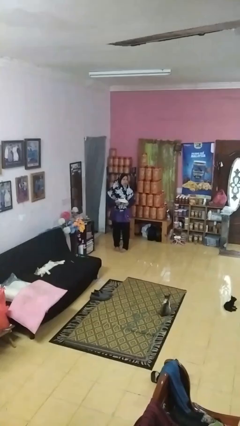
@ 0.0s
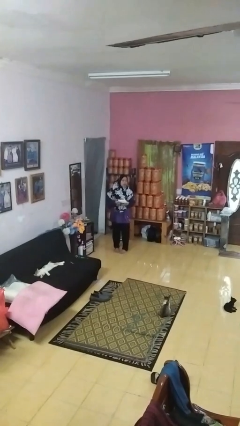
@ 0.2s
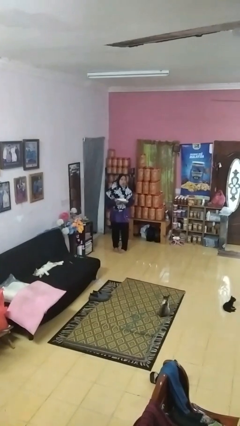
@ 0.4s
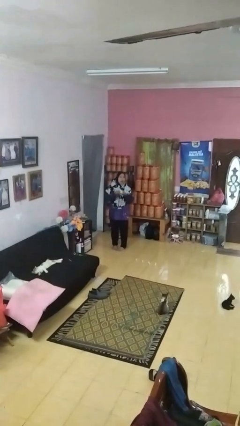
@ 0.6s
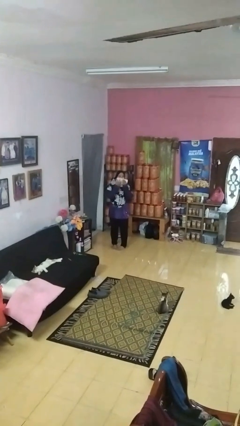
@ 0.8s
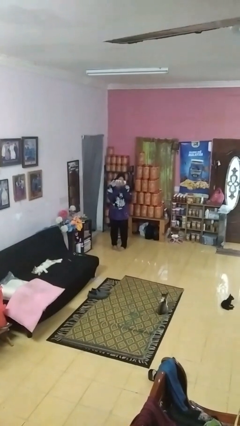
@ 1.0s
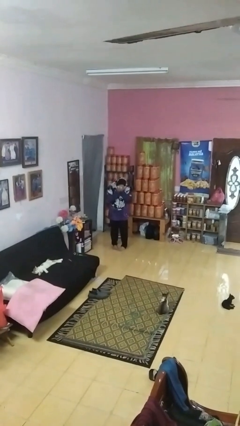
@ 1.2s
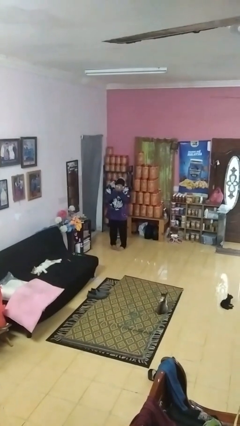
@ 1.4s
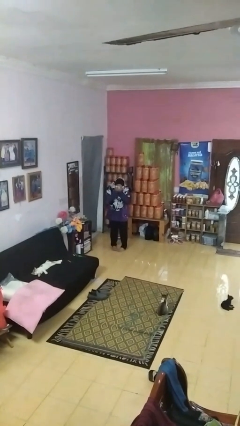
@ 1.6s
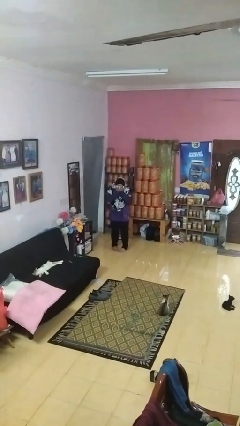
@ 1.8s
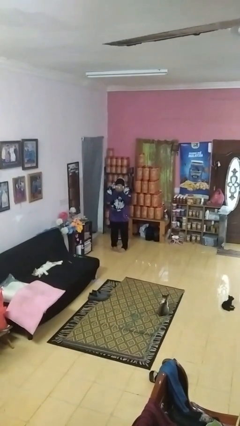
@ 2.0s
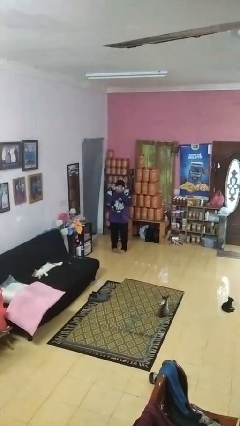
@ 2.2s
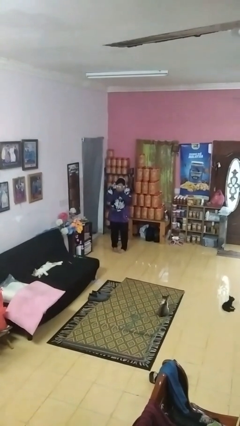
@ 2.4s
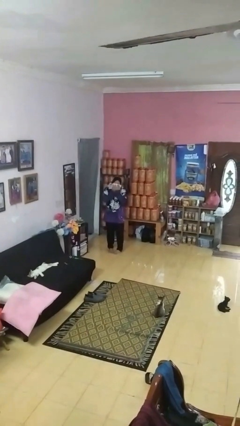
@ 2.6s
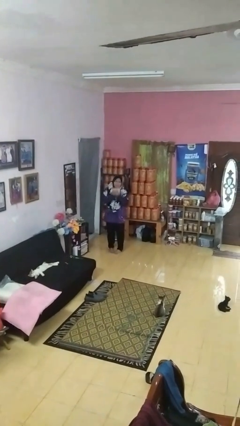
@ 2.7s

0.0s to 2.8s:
person blows nose

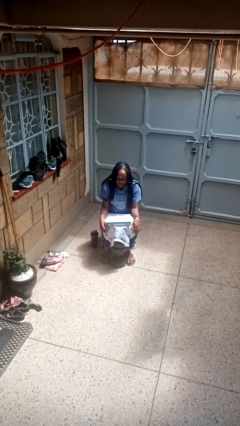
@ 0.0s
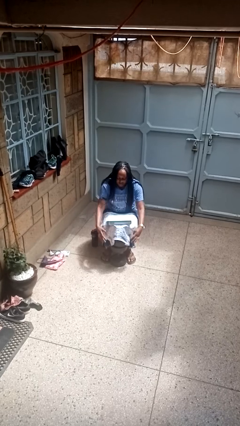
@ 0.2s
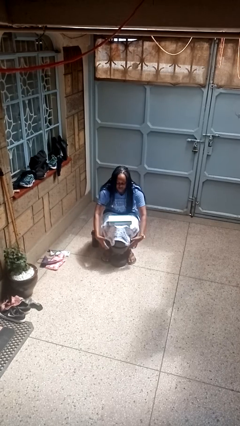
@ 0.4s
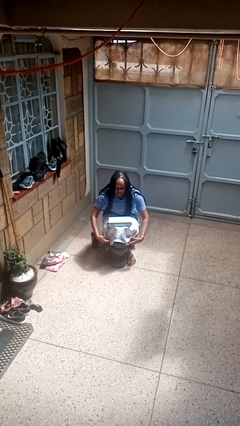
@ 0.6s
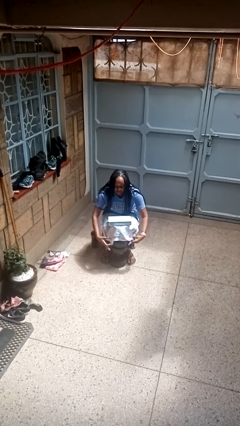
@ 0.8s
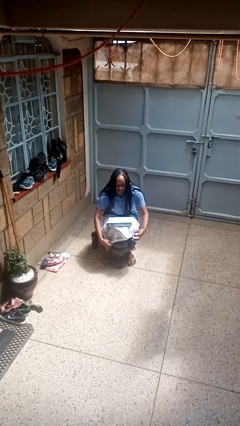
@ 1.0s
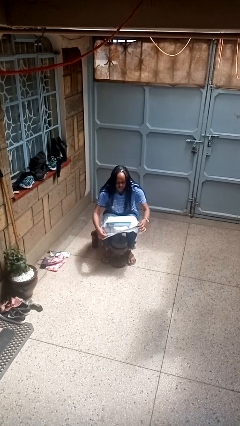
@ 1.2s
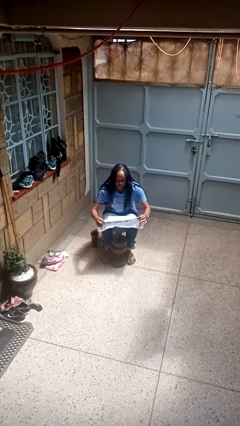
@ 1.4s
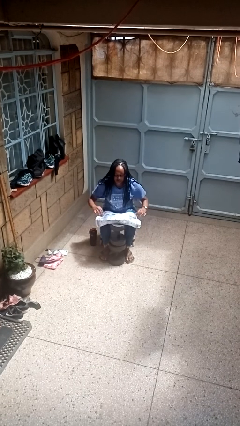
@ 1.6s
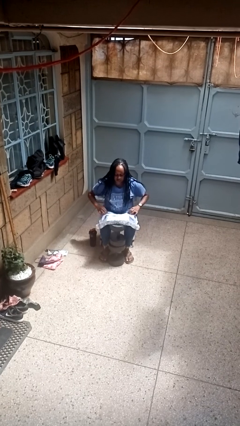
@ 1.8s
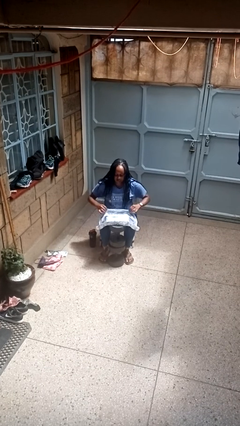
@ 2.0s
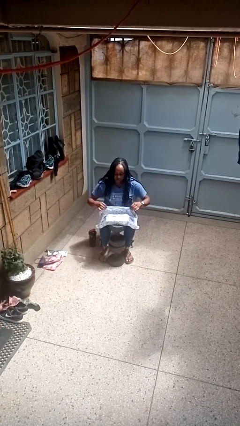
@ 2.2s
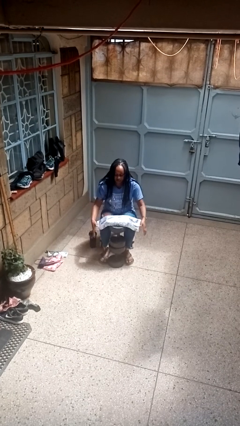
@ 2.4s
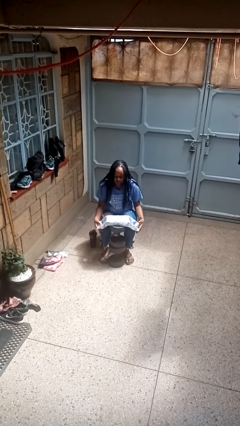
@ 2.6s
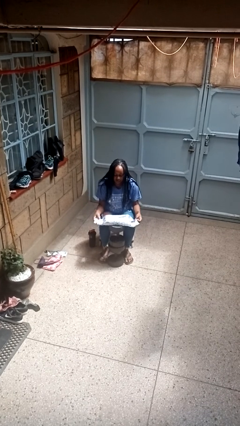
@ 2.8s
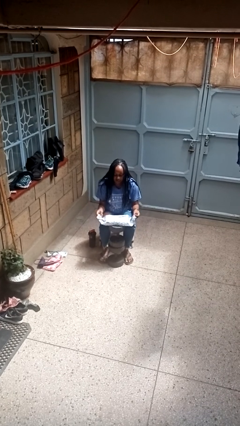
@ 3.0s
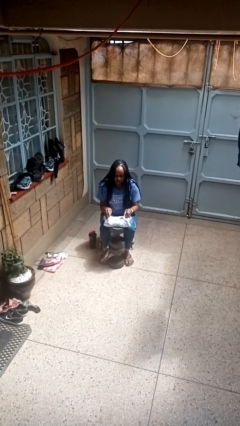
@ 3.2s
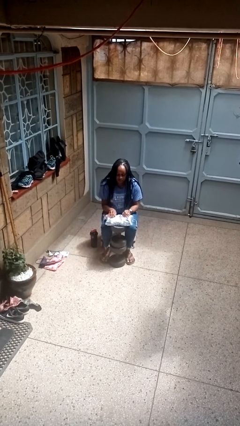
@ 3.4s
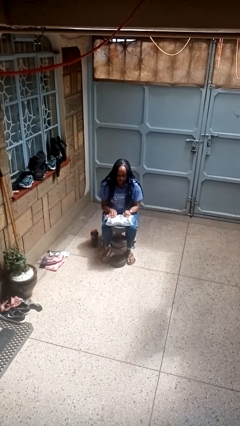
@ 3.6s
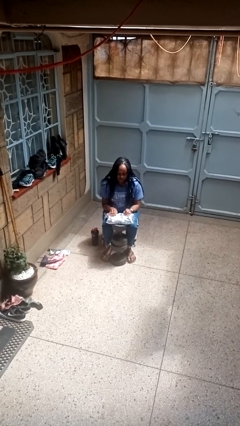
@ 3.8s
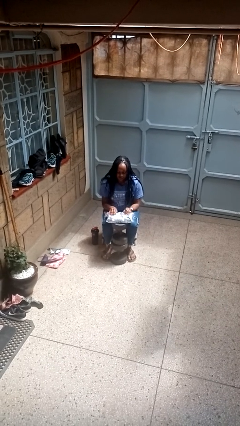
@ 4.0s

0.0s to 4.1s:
person wraps box

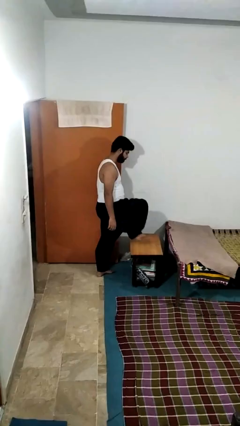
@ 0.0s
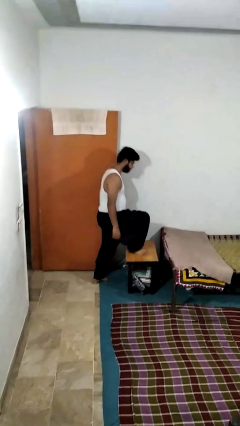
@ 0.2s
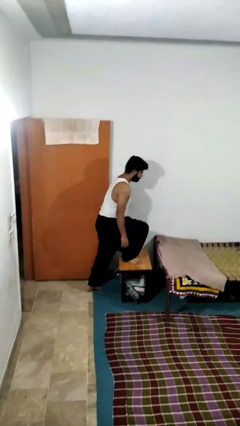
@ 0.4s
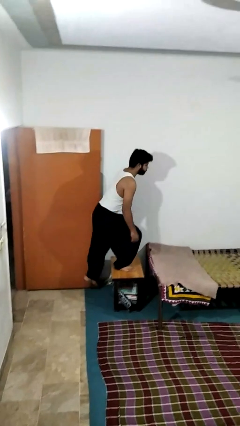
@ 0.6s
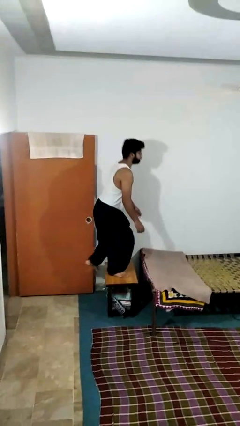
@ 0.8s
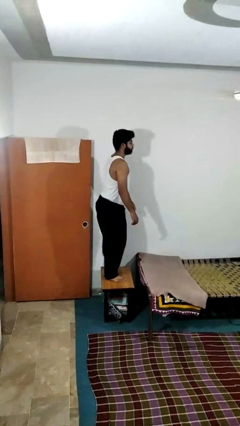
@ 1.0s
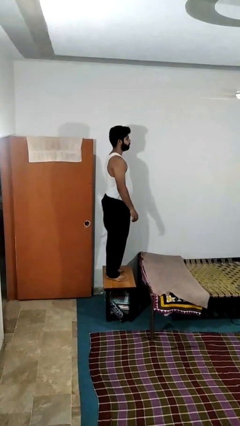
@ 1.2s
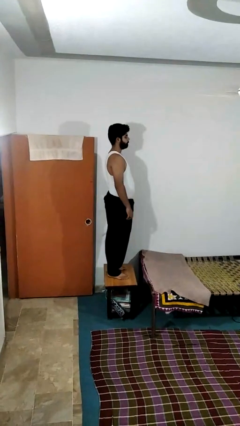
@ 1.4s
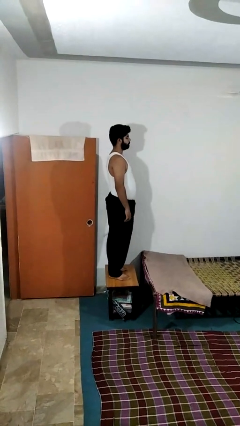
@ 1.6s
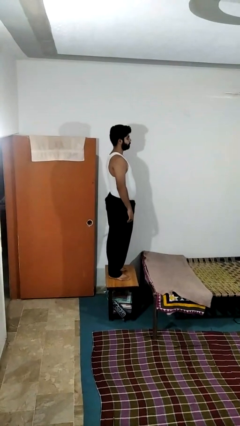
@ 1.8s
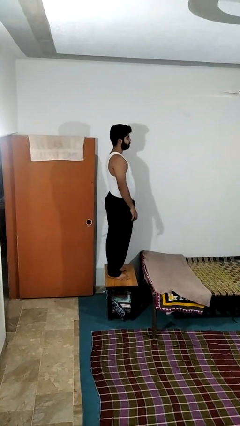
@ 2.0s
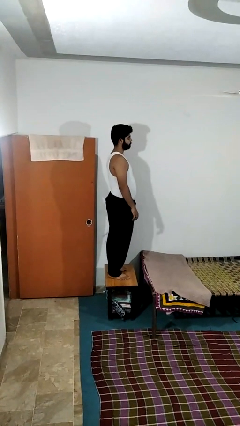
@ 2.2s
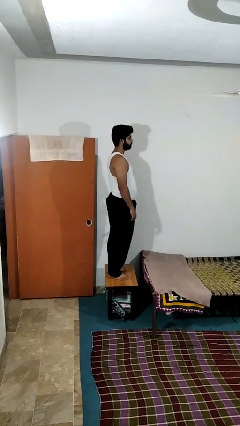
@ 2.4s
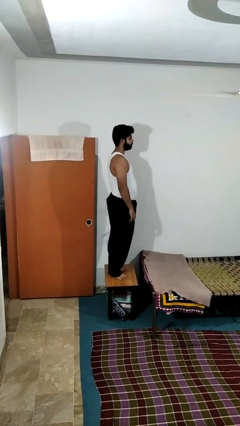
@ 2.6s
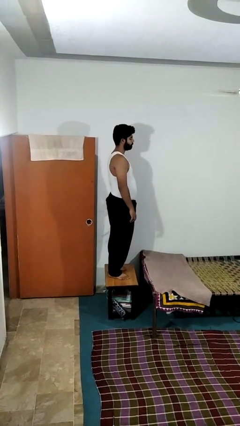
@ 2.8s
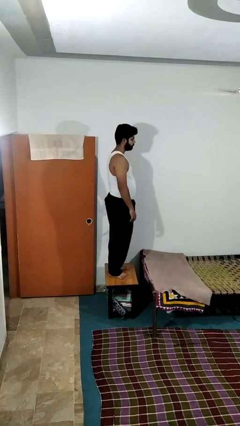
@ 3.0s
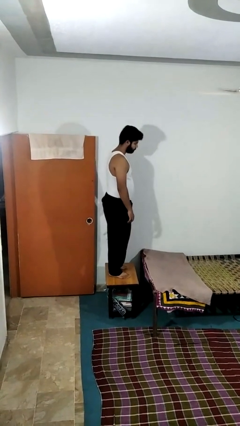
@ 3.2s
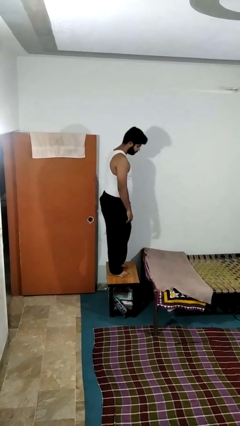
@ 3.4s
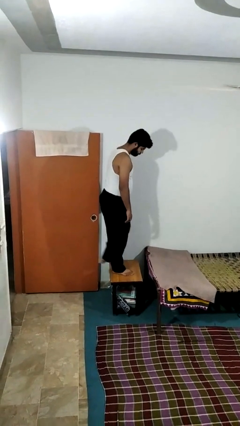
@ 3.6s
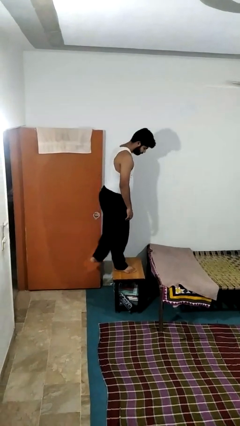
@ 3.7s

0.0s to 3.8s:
person climbs on table

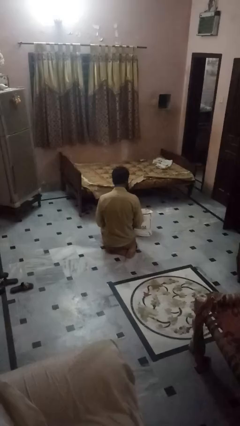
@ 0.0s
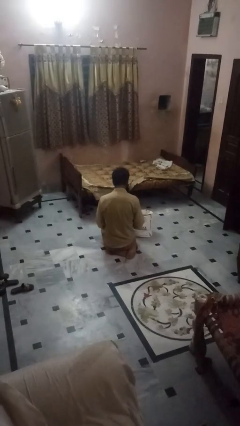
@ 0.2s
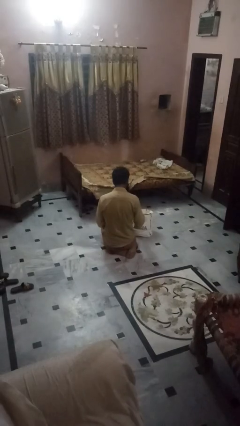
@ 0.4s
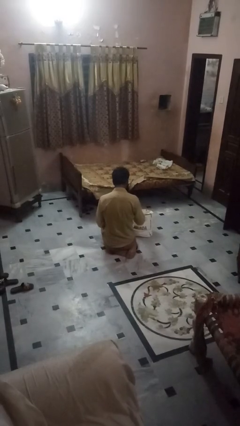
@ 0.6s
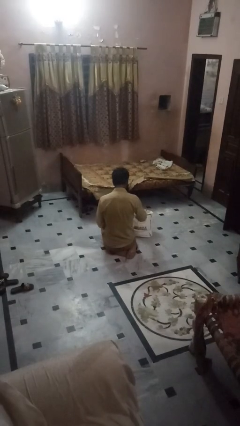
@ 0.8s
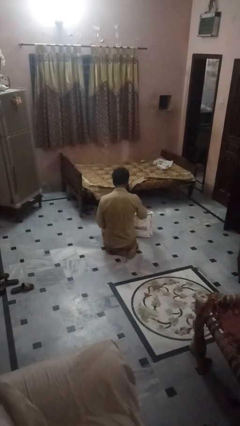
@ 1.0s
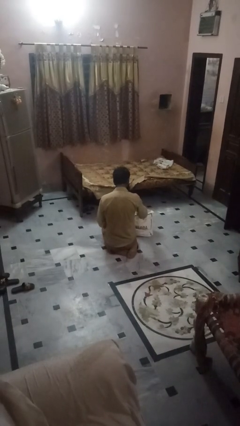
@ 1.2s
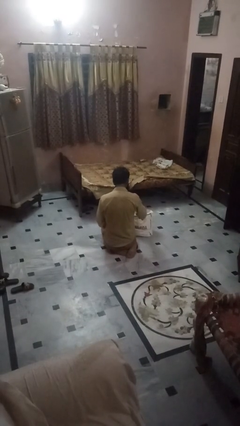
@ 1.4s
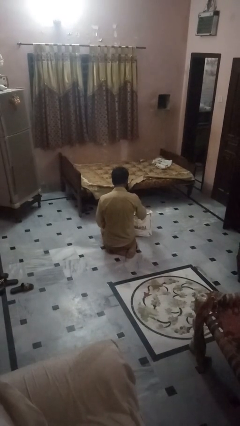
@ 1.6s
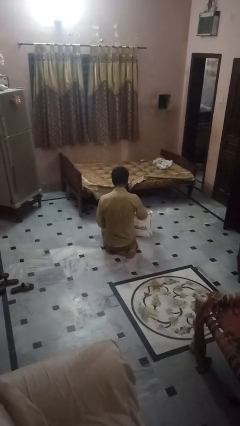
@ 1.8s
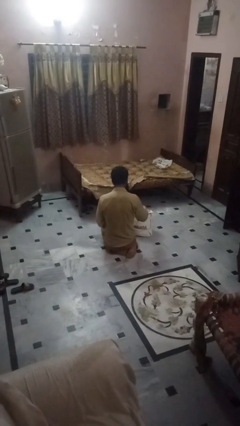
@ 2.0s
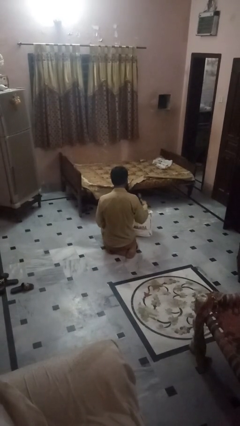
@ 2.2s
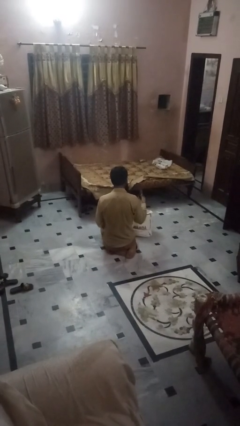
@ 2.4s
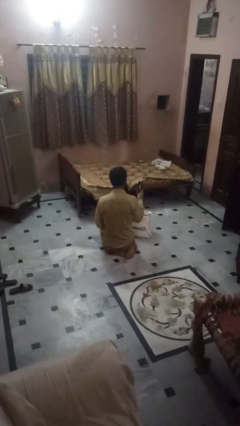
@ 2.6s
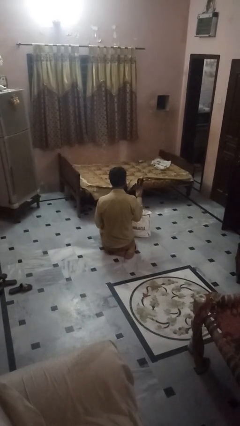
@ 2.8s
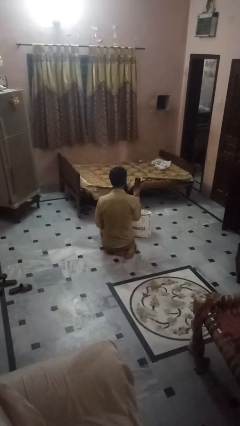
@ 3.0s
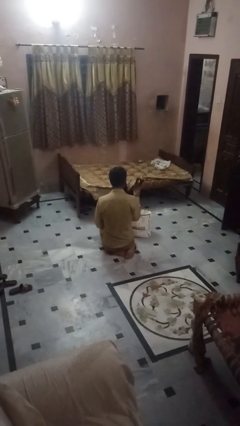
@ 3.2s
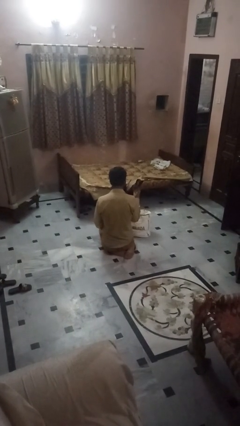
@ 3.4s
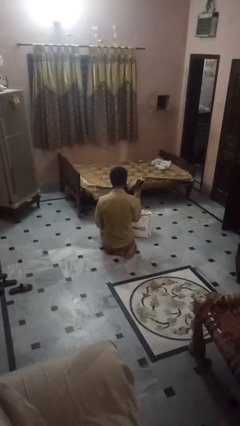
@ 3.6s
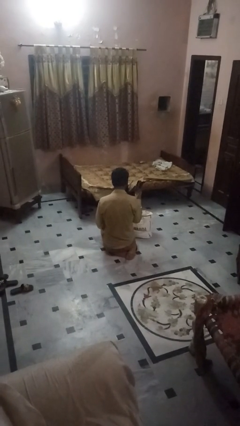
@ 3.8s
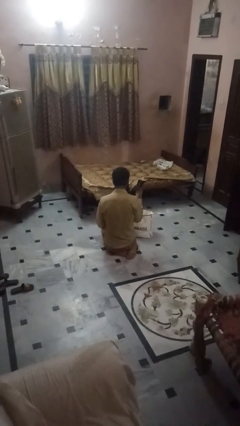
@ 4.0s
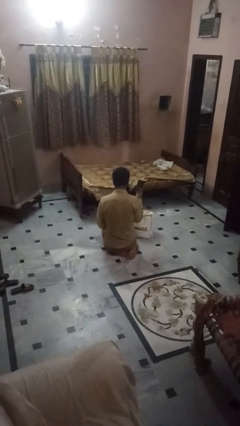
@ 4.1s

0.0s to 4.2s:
person takes object from bag

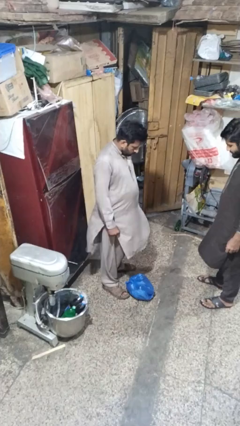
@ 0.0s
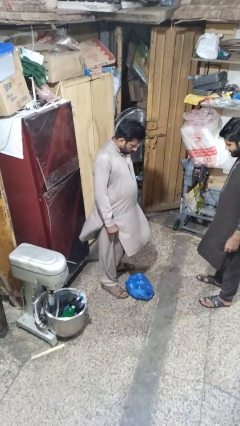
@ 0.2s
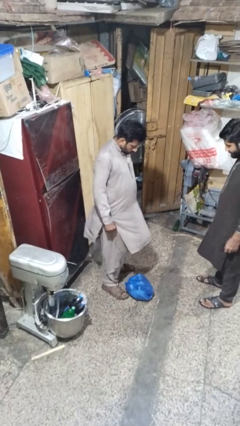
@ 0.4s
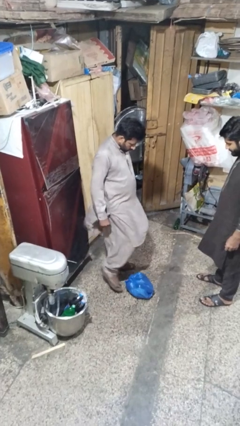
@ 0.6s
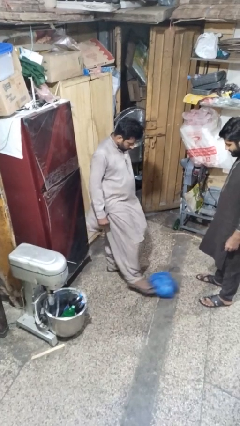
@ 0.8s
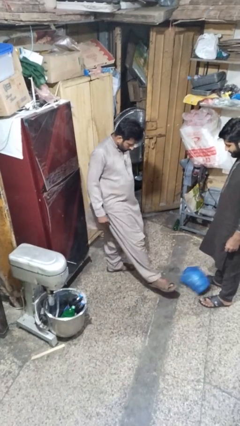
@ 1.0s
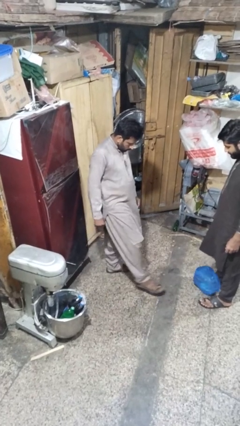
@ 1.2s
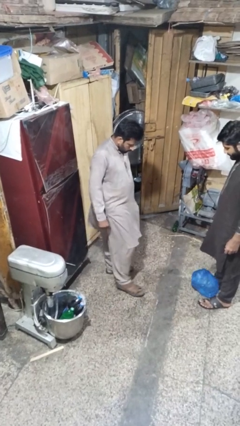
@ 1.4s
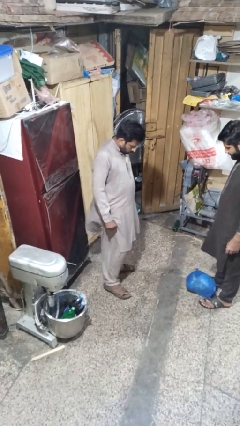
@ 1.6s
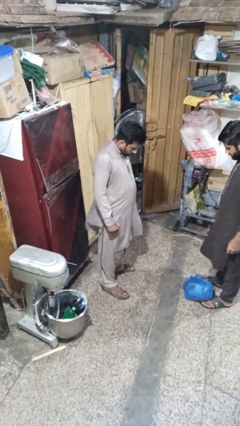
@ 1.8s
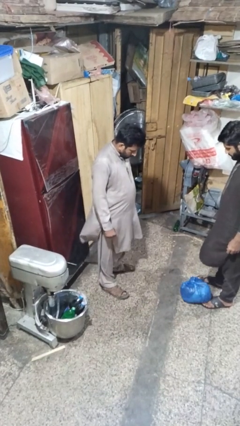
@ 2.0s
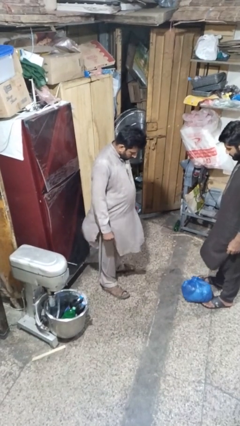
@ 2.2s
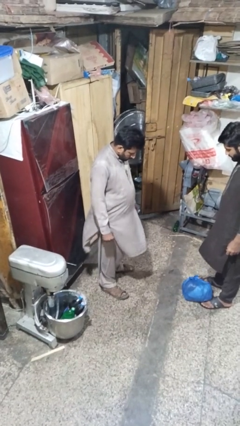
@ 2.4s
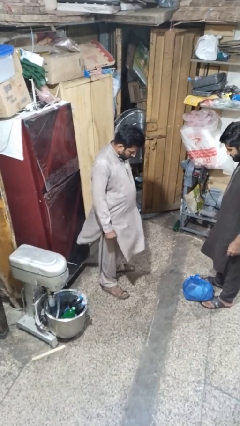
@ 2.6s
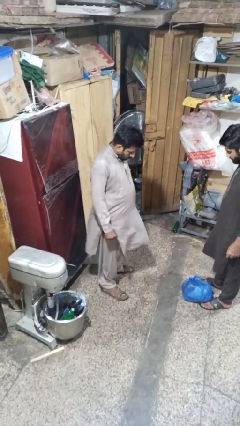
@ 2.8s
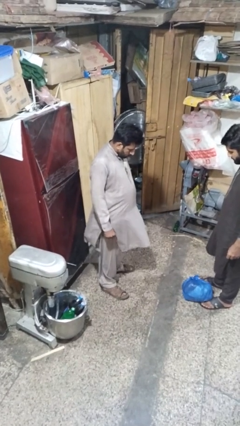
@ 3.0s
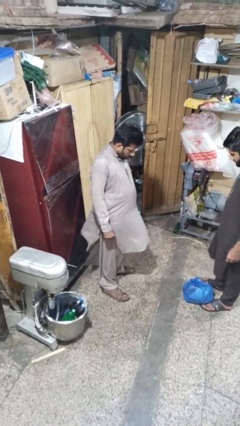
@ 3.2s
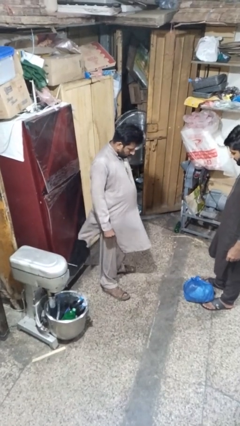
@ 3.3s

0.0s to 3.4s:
person kicks object to person
